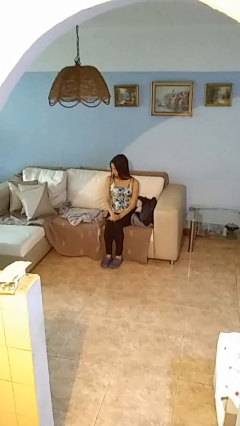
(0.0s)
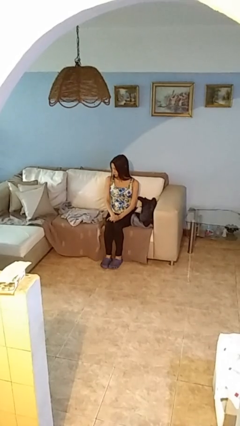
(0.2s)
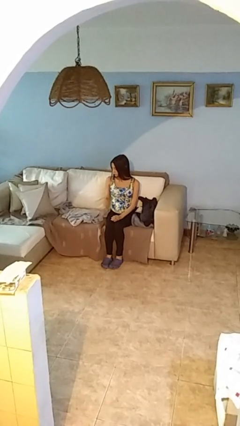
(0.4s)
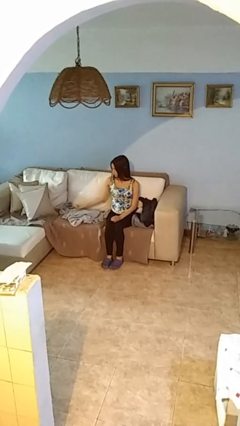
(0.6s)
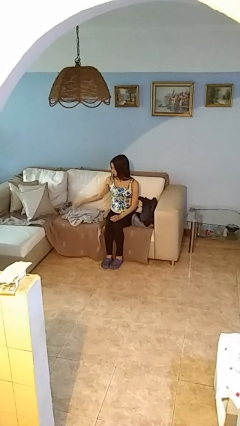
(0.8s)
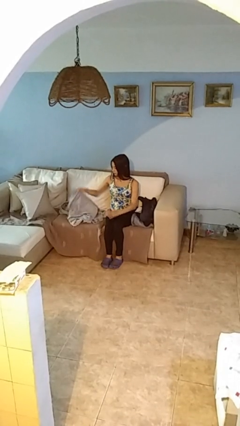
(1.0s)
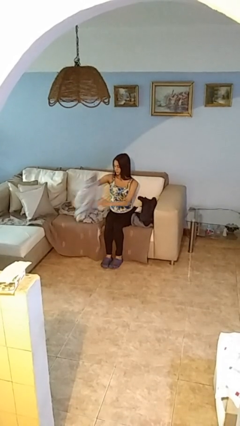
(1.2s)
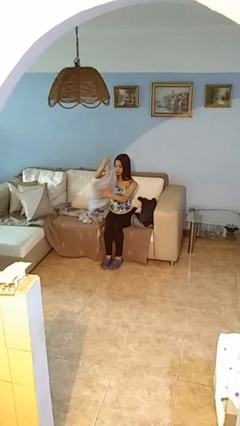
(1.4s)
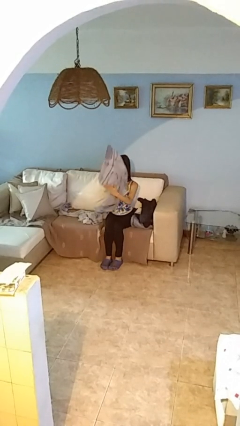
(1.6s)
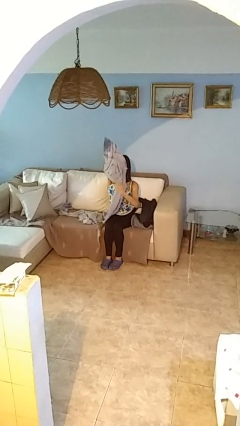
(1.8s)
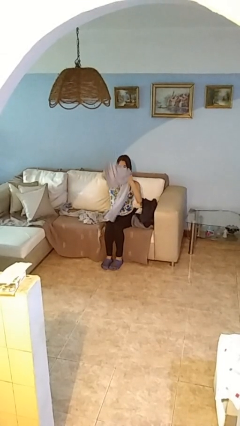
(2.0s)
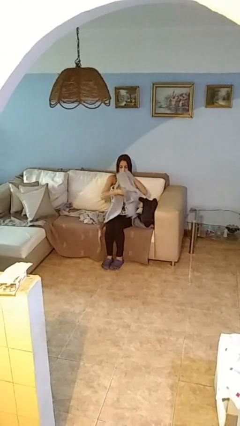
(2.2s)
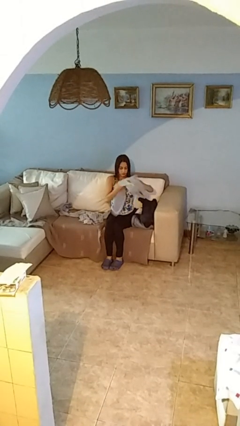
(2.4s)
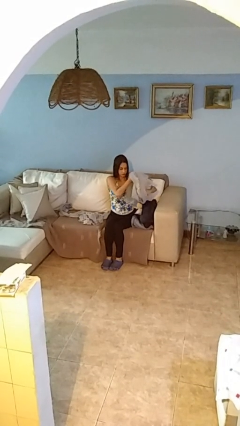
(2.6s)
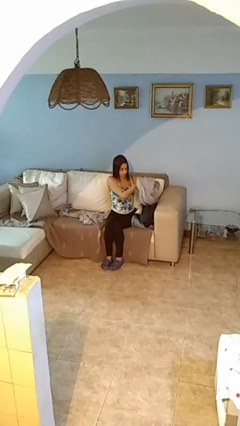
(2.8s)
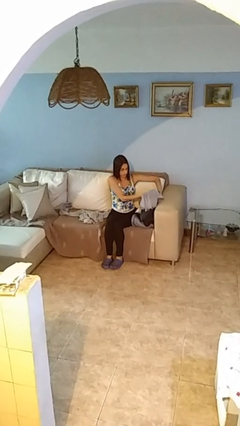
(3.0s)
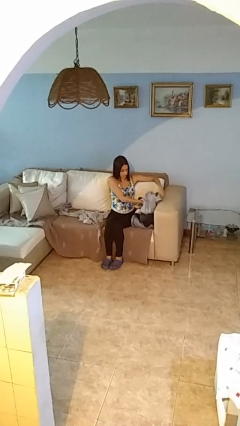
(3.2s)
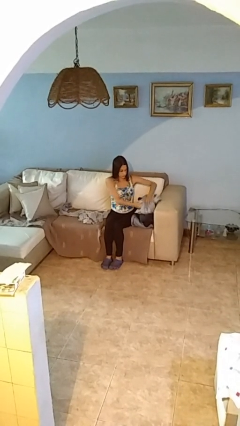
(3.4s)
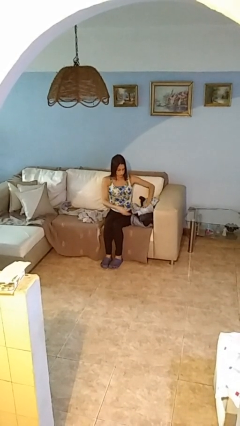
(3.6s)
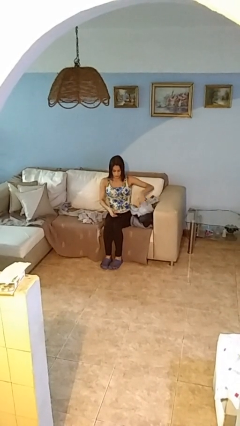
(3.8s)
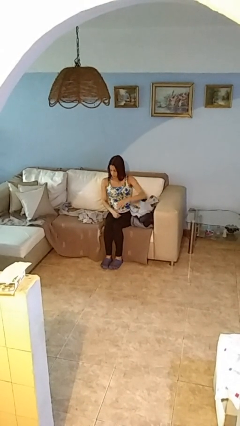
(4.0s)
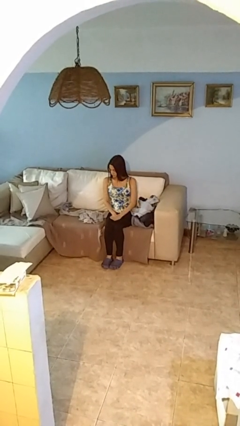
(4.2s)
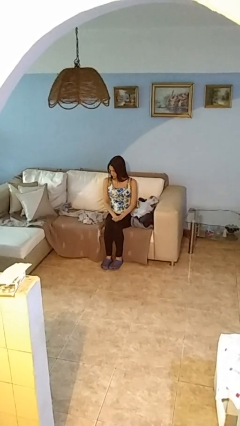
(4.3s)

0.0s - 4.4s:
person folds pants

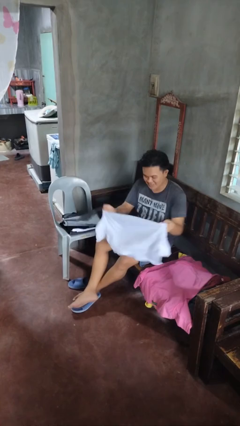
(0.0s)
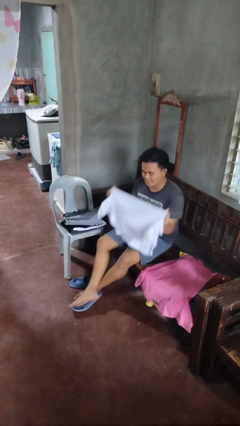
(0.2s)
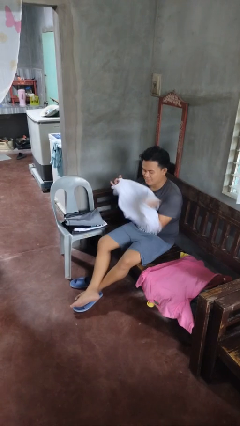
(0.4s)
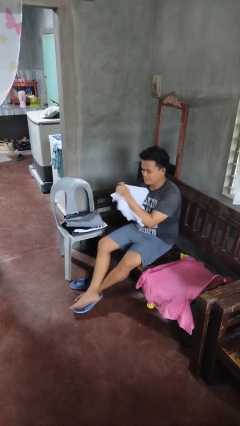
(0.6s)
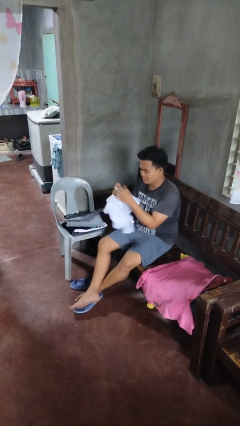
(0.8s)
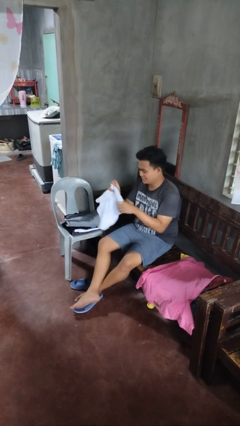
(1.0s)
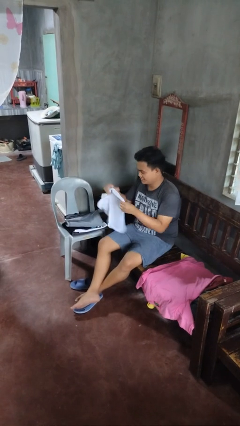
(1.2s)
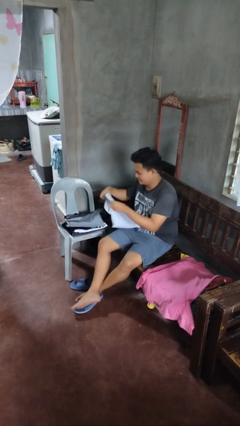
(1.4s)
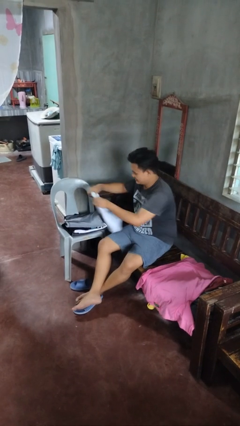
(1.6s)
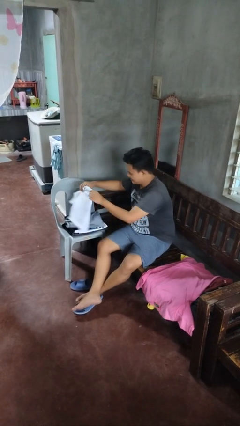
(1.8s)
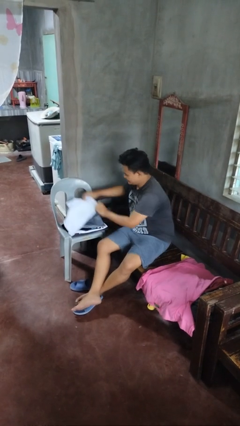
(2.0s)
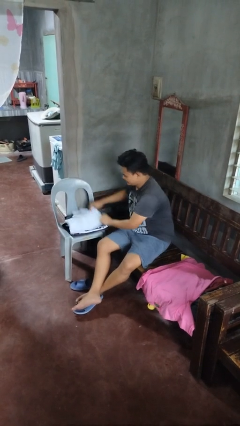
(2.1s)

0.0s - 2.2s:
person folds shirt

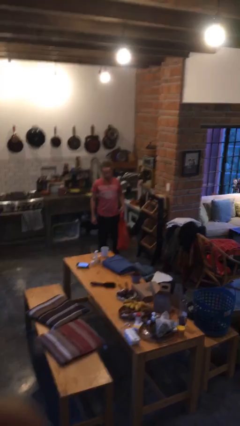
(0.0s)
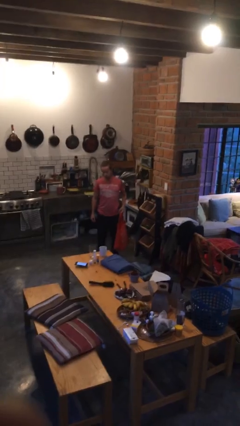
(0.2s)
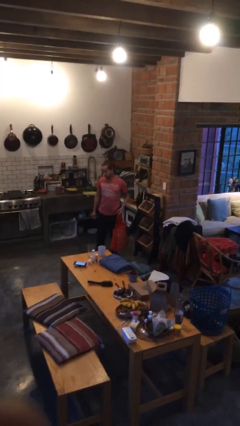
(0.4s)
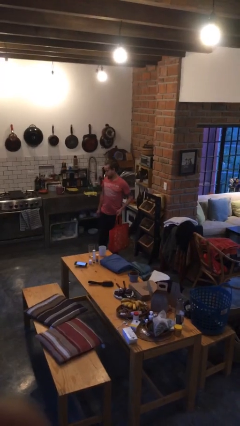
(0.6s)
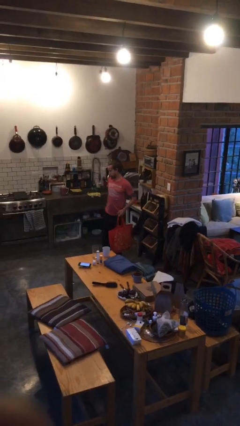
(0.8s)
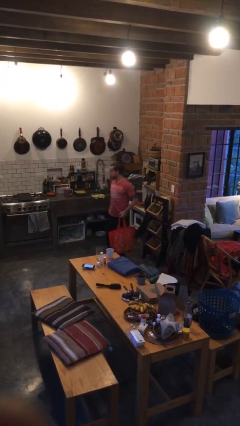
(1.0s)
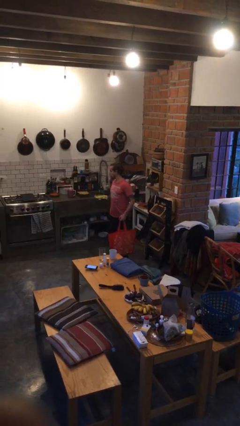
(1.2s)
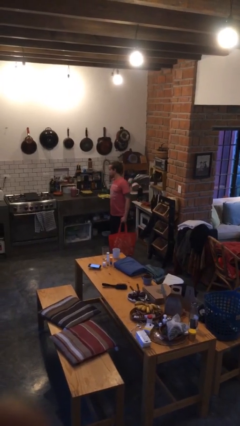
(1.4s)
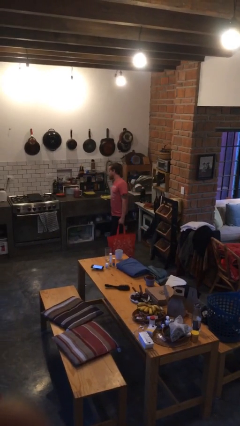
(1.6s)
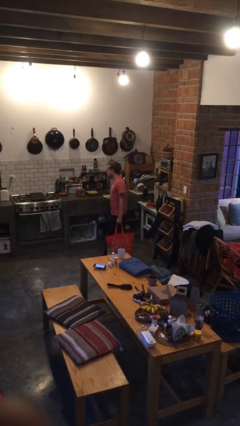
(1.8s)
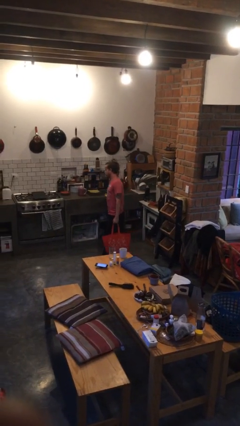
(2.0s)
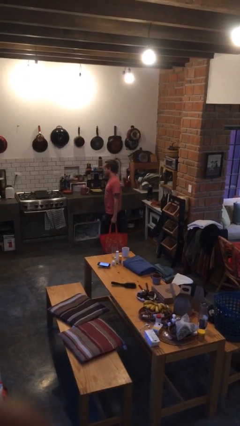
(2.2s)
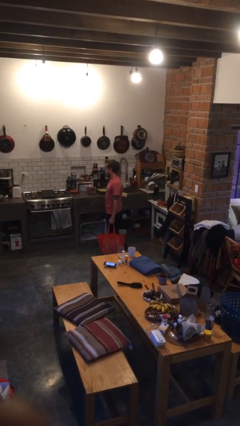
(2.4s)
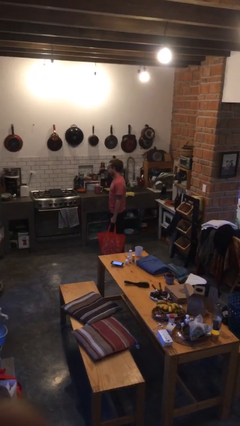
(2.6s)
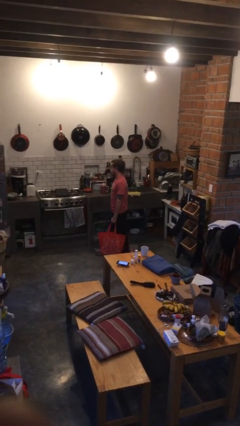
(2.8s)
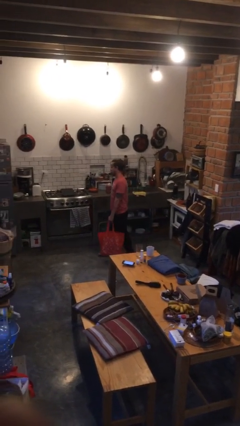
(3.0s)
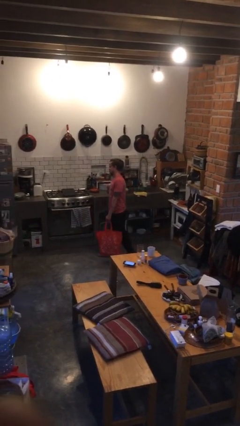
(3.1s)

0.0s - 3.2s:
person carries groceries

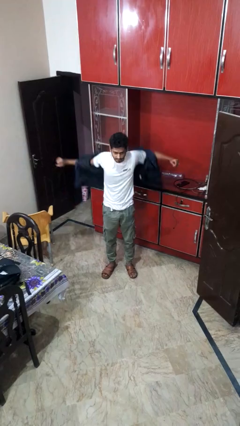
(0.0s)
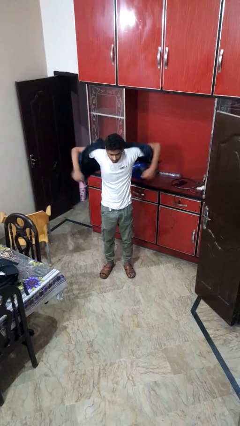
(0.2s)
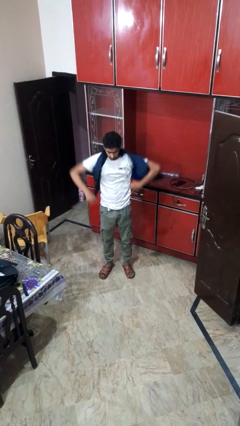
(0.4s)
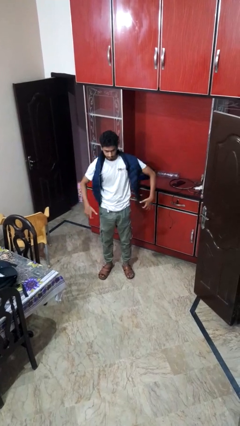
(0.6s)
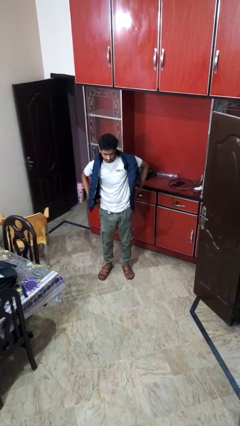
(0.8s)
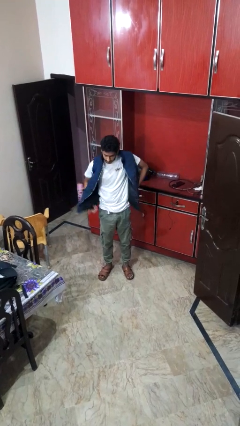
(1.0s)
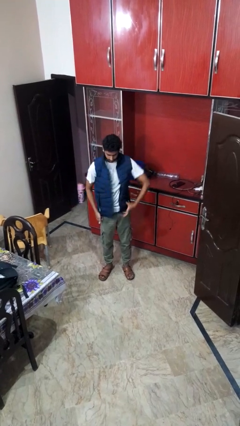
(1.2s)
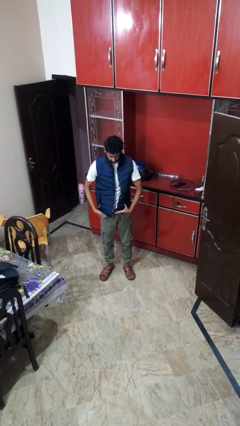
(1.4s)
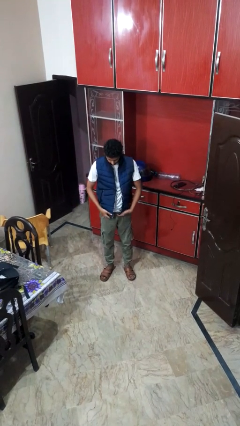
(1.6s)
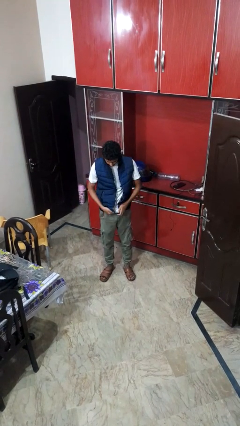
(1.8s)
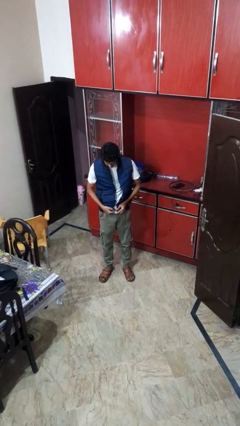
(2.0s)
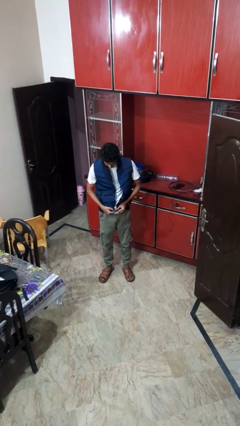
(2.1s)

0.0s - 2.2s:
person puts on jacket

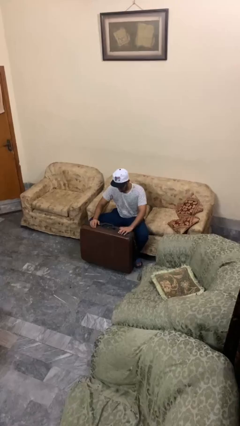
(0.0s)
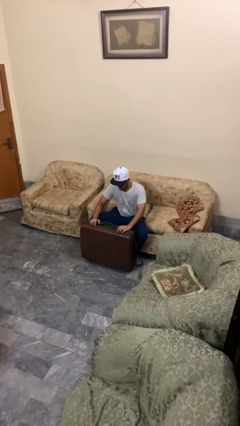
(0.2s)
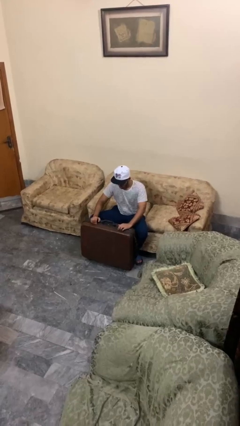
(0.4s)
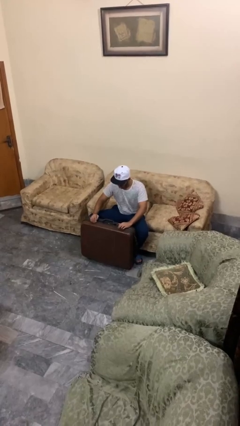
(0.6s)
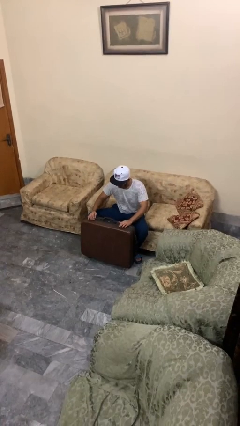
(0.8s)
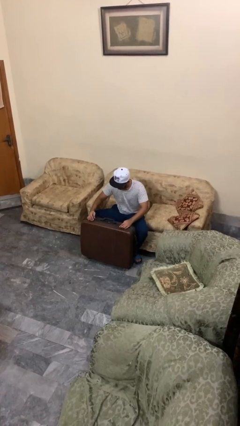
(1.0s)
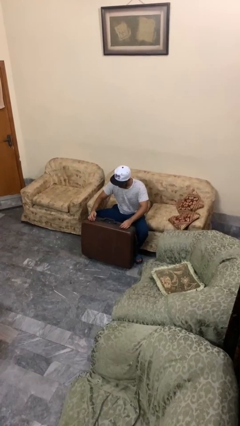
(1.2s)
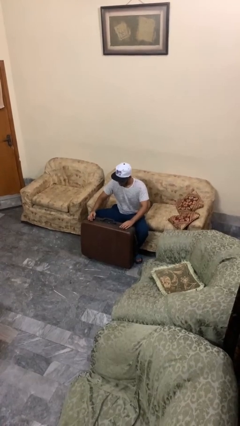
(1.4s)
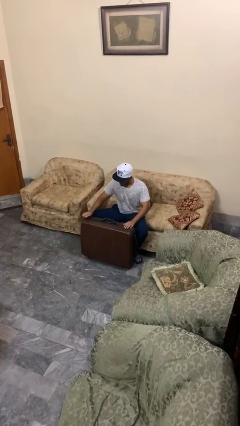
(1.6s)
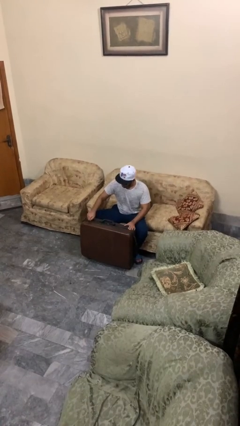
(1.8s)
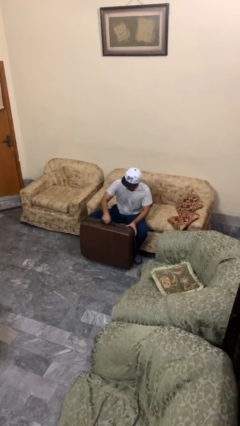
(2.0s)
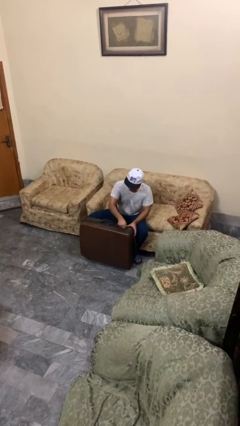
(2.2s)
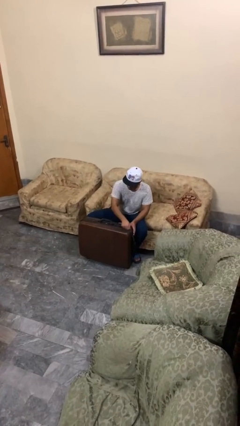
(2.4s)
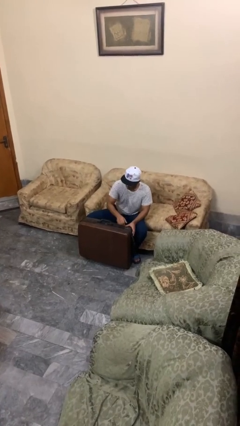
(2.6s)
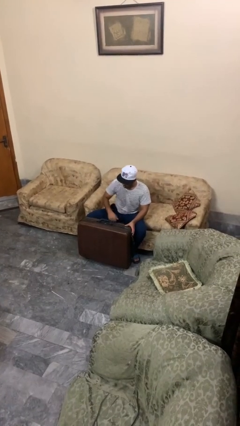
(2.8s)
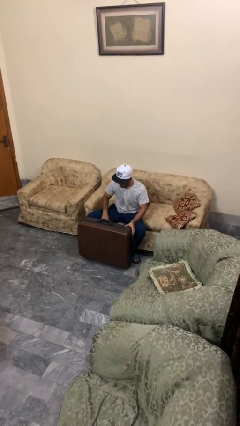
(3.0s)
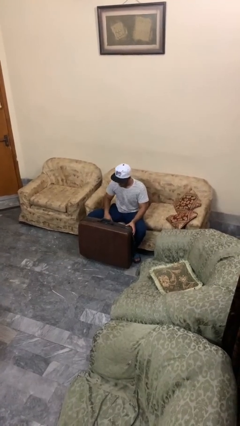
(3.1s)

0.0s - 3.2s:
person closes suitcase

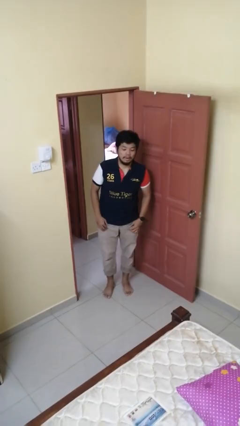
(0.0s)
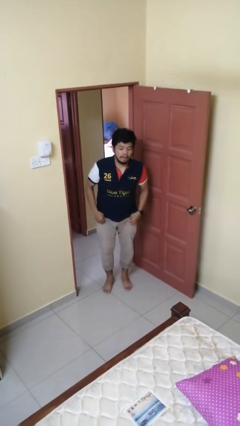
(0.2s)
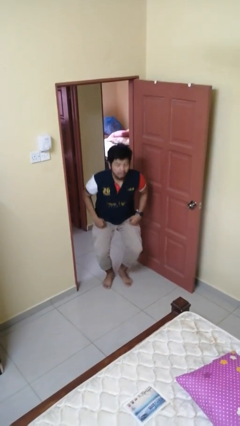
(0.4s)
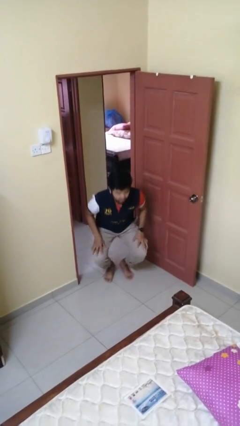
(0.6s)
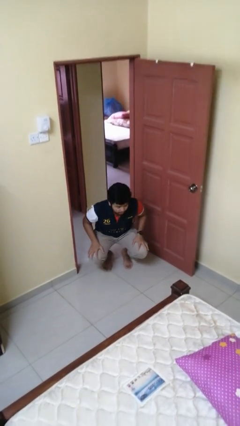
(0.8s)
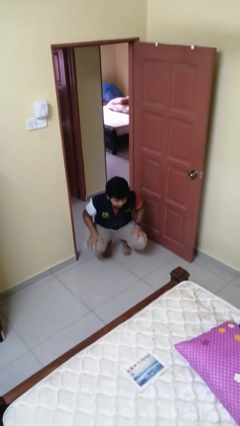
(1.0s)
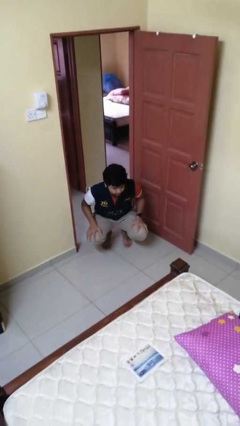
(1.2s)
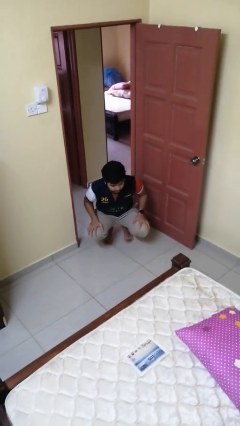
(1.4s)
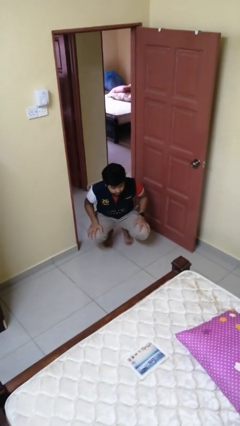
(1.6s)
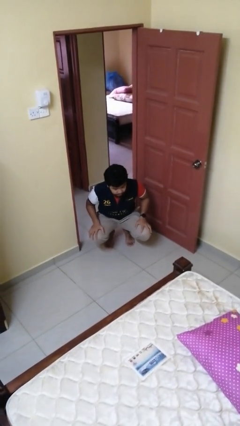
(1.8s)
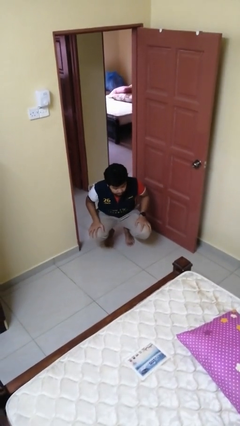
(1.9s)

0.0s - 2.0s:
person squats

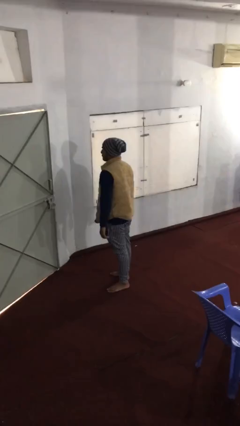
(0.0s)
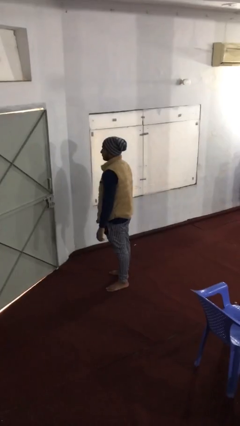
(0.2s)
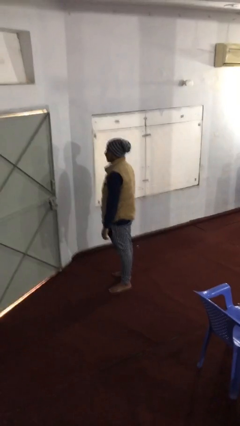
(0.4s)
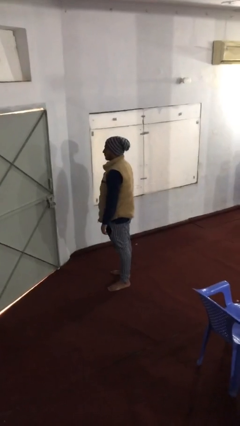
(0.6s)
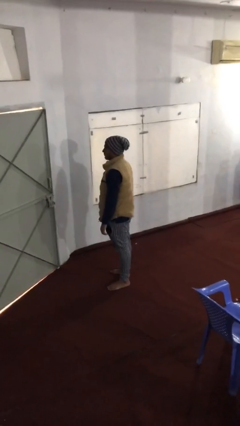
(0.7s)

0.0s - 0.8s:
person opens facility door
